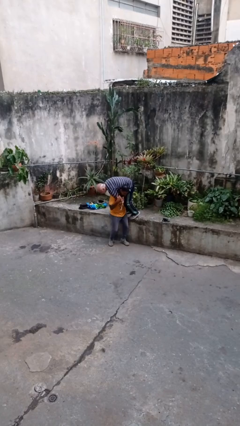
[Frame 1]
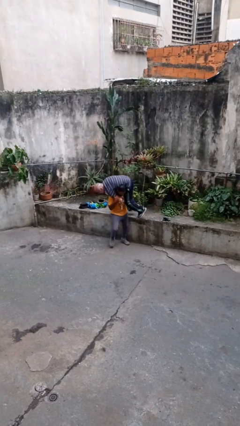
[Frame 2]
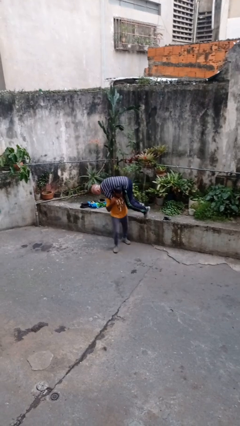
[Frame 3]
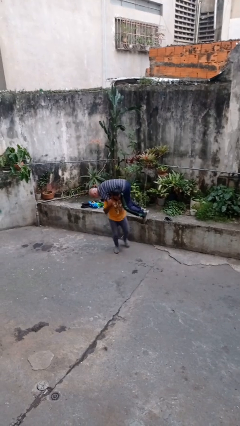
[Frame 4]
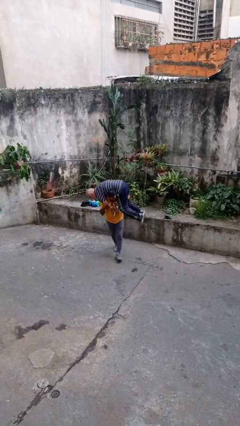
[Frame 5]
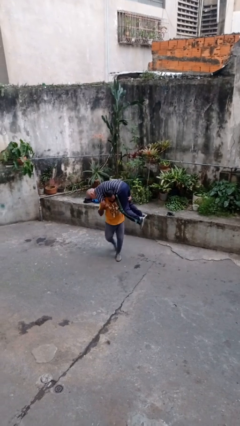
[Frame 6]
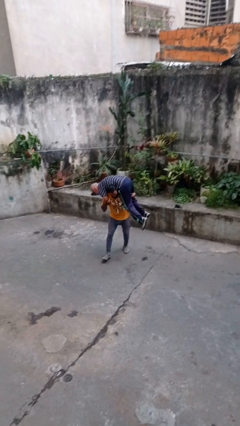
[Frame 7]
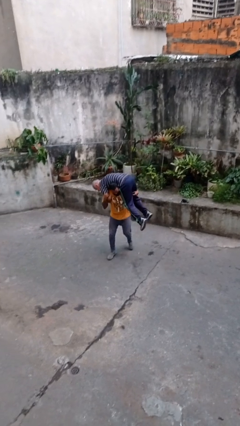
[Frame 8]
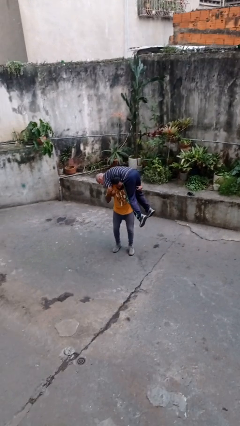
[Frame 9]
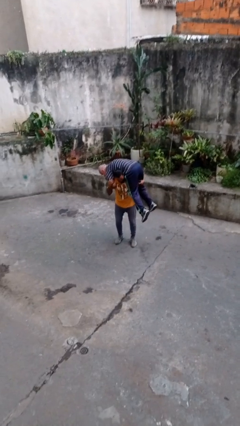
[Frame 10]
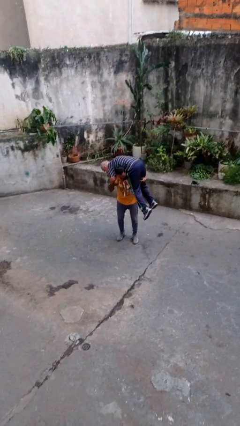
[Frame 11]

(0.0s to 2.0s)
person carries person over shoulder

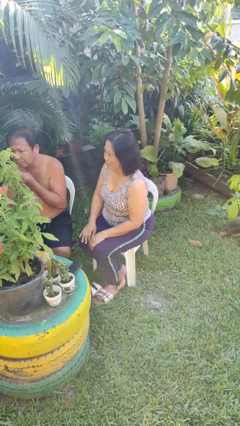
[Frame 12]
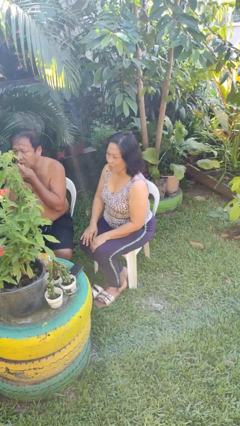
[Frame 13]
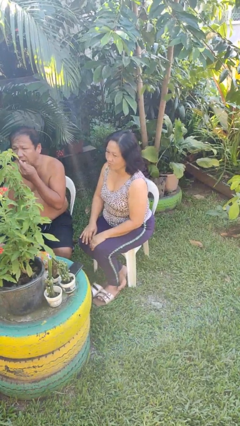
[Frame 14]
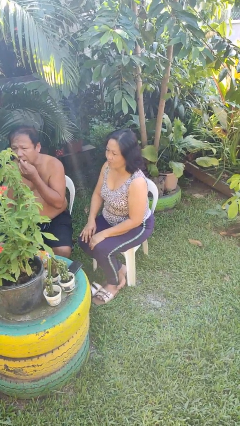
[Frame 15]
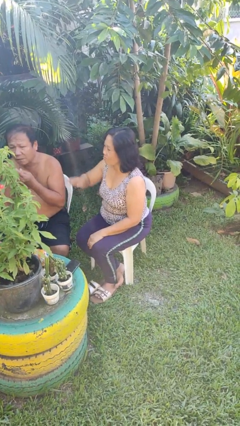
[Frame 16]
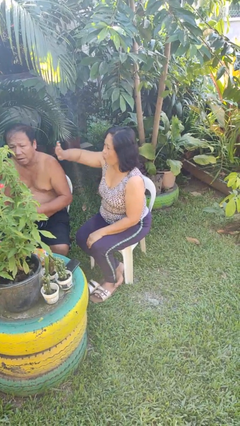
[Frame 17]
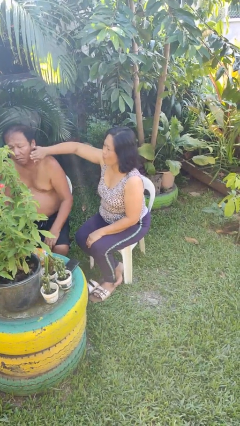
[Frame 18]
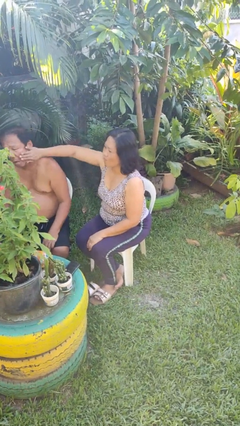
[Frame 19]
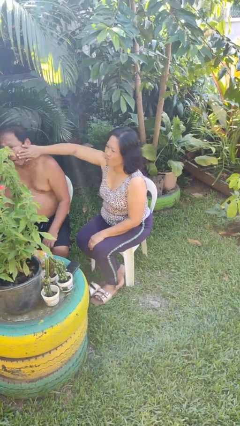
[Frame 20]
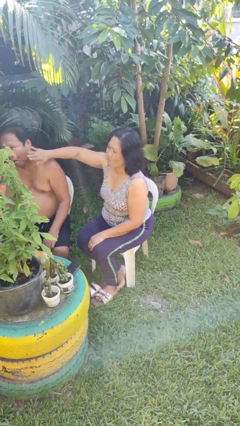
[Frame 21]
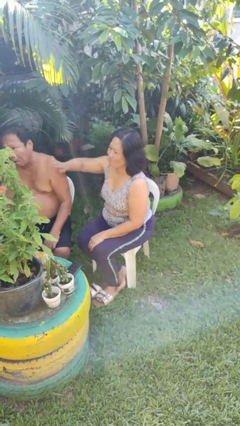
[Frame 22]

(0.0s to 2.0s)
person touches face of person

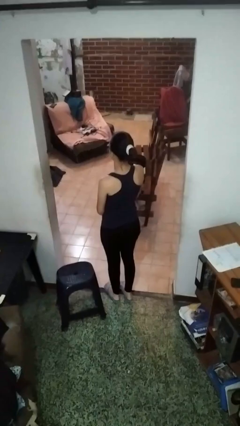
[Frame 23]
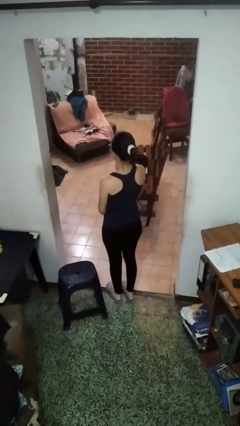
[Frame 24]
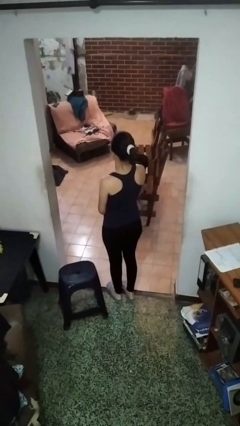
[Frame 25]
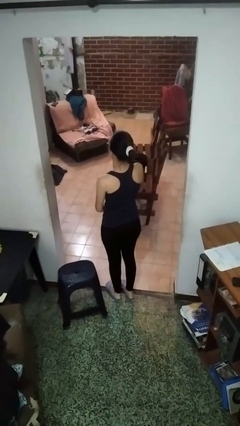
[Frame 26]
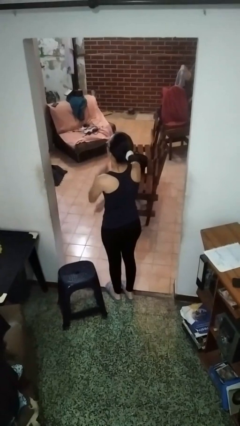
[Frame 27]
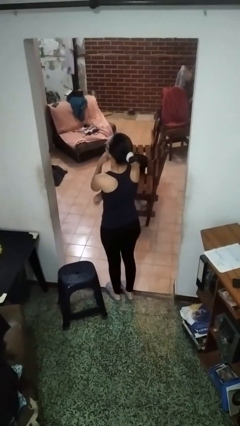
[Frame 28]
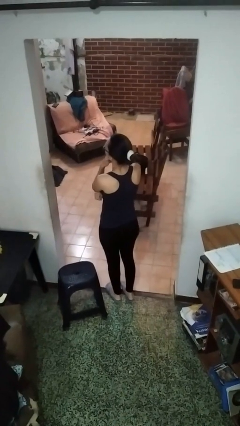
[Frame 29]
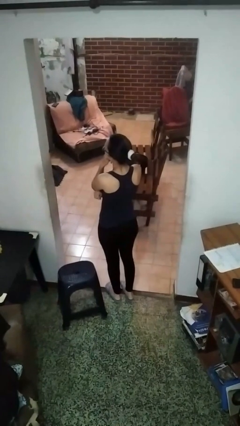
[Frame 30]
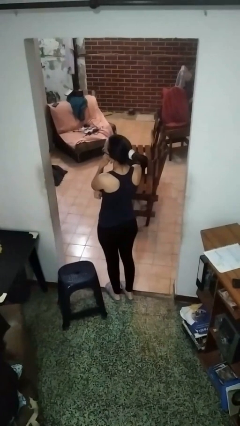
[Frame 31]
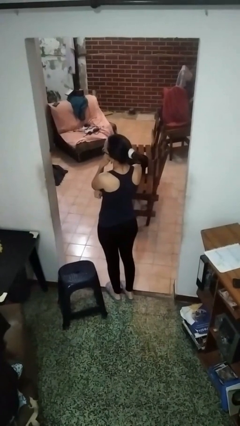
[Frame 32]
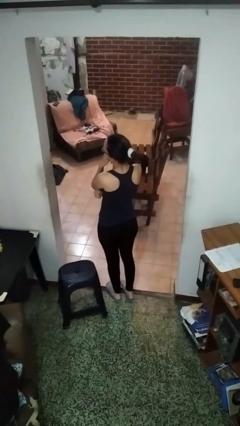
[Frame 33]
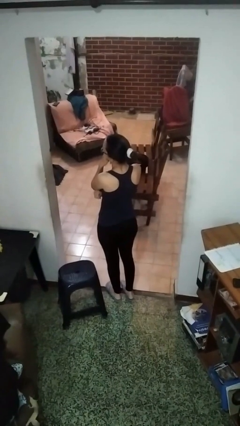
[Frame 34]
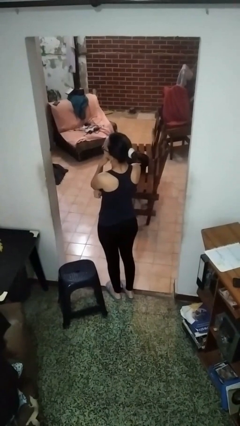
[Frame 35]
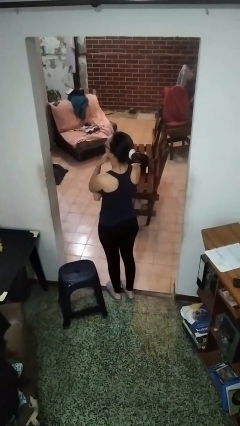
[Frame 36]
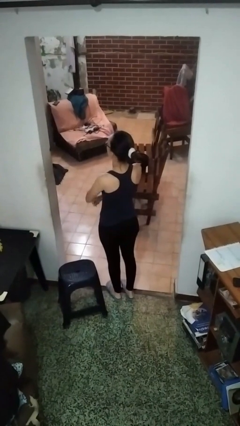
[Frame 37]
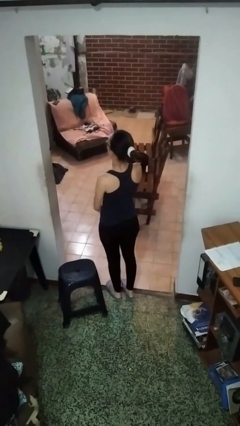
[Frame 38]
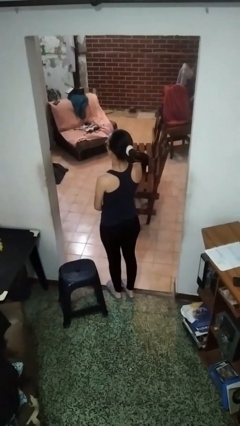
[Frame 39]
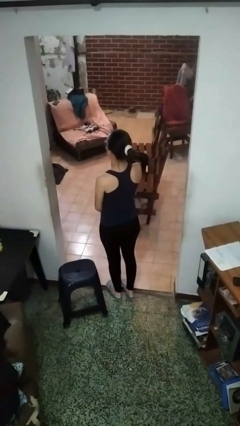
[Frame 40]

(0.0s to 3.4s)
person strokes chin

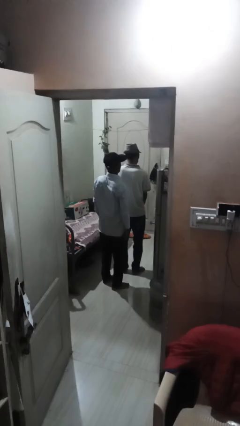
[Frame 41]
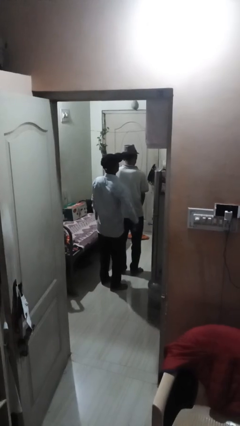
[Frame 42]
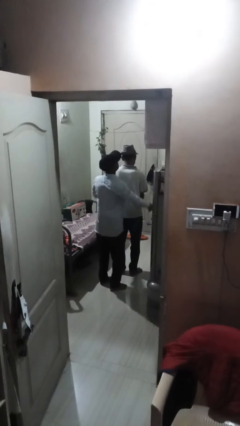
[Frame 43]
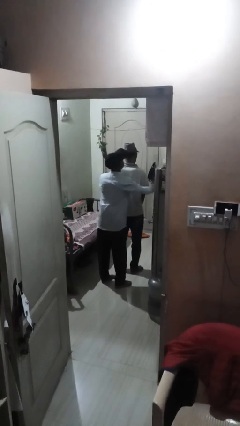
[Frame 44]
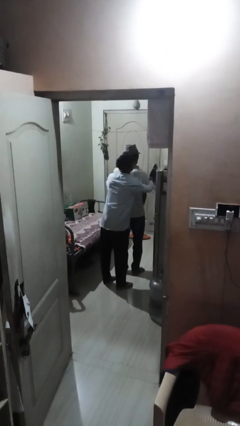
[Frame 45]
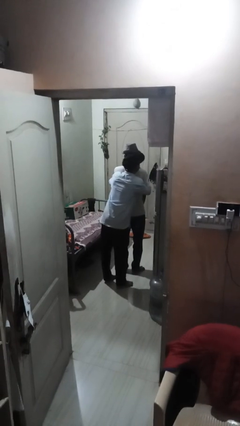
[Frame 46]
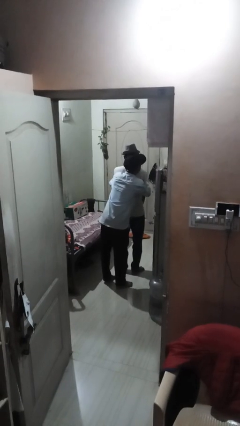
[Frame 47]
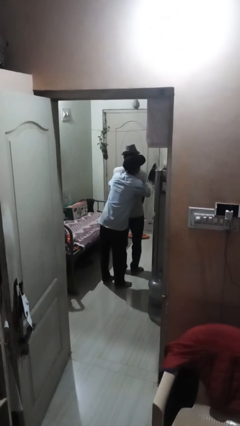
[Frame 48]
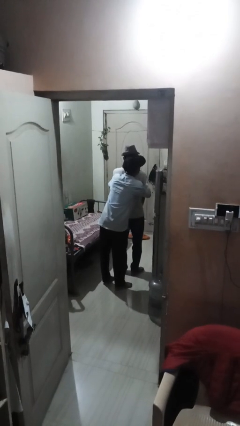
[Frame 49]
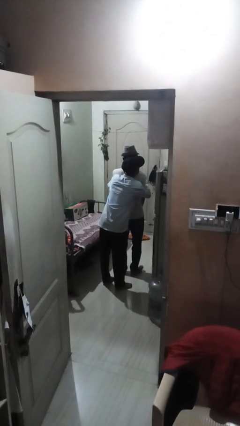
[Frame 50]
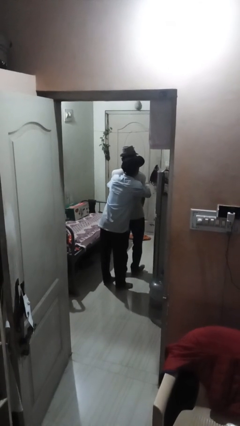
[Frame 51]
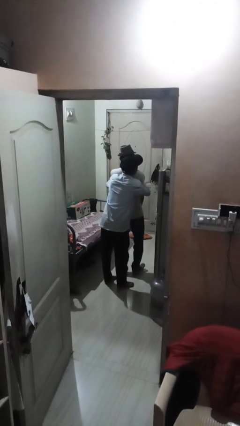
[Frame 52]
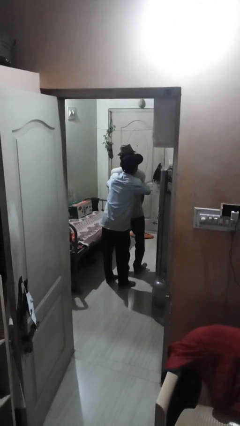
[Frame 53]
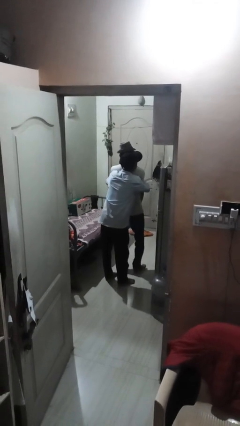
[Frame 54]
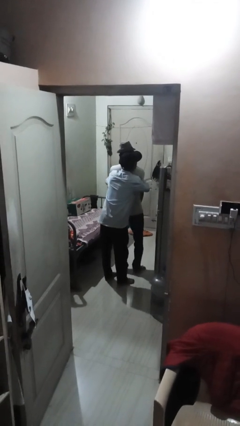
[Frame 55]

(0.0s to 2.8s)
person hugs person from behind

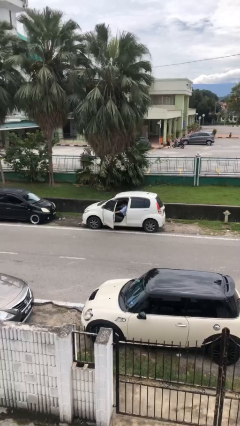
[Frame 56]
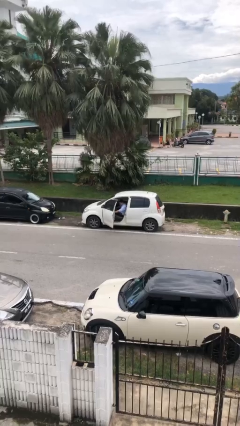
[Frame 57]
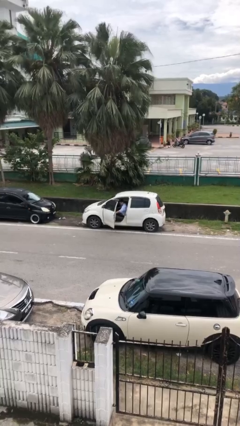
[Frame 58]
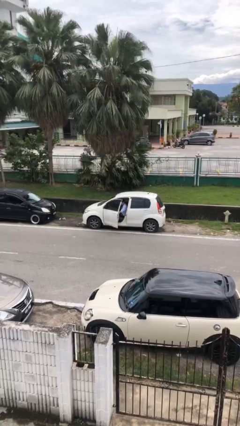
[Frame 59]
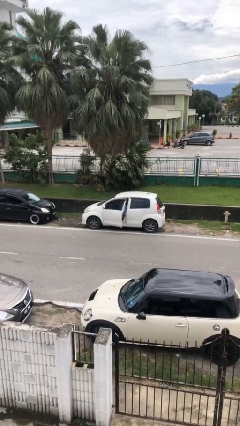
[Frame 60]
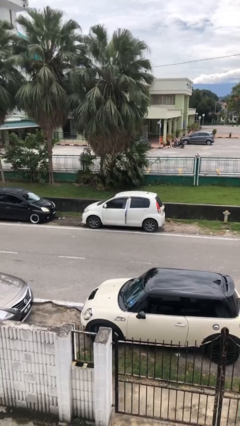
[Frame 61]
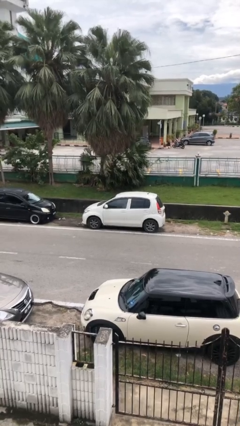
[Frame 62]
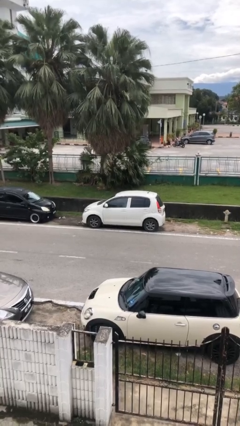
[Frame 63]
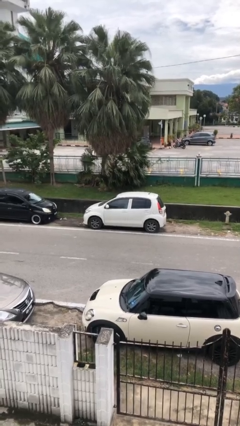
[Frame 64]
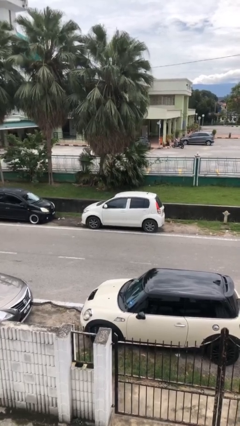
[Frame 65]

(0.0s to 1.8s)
person closes car door

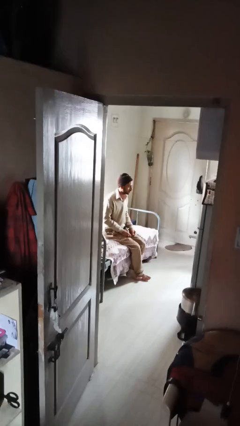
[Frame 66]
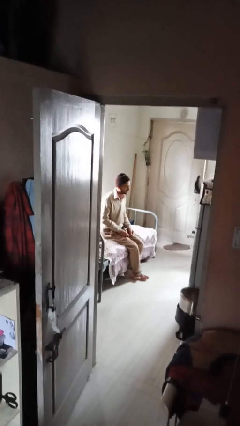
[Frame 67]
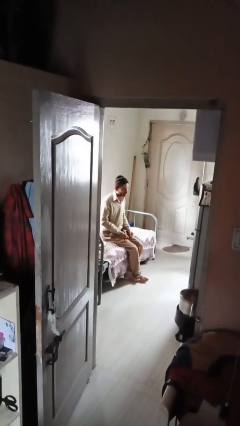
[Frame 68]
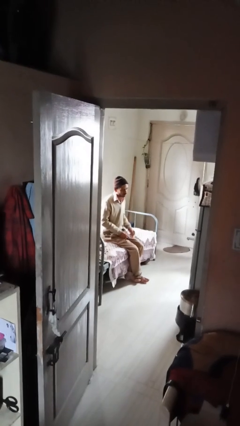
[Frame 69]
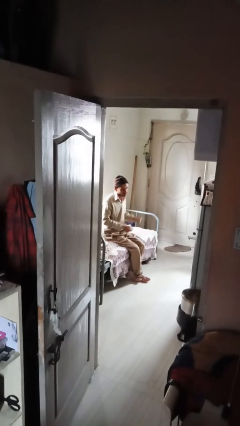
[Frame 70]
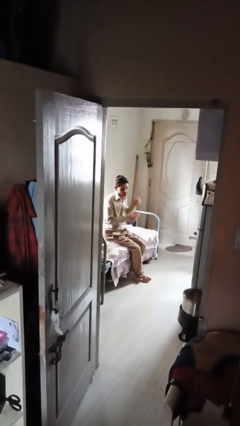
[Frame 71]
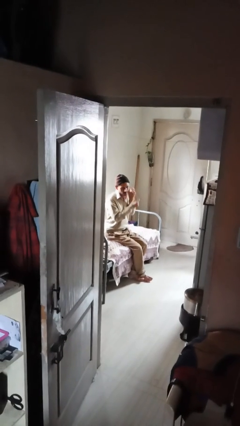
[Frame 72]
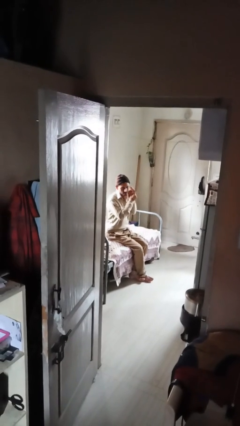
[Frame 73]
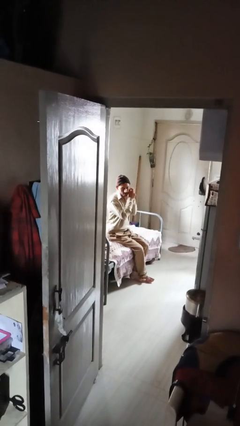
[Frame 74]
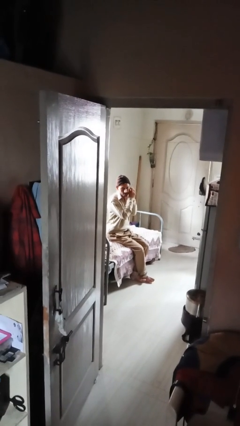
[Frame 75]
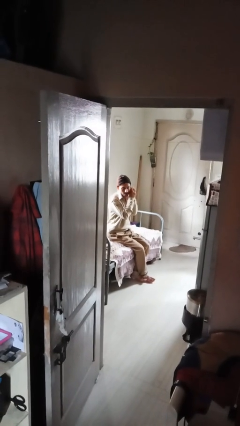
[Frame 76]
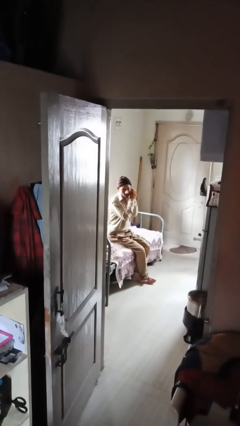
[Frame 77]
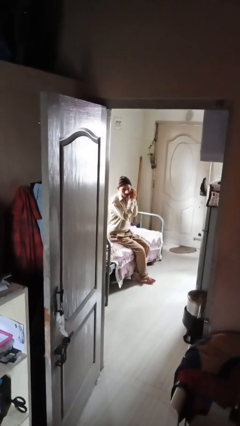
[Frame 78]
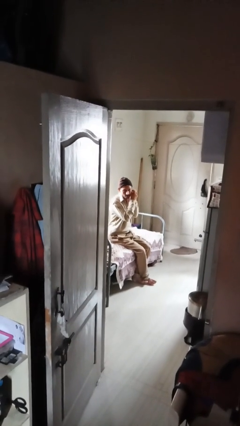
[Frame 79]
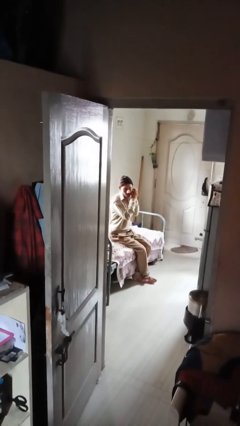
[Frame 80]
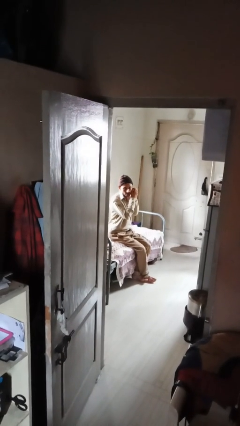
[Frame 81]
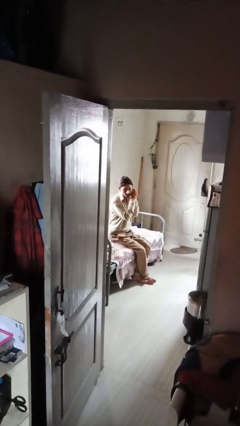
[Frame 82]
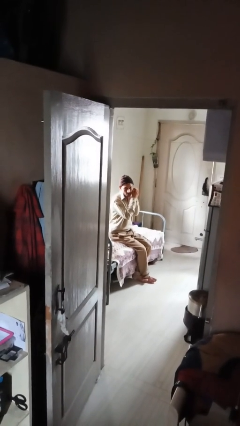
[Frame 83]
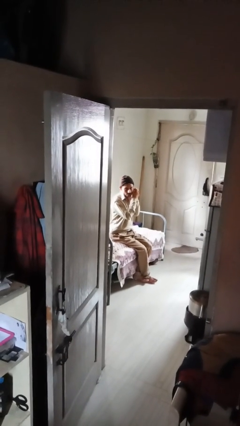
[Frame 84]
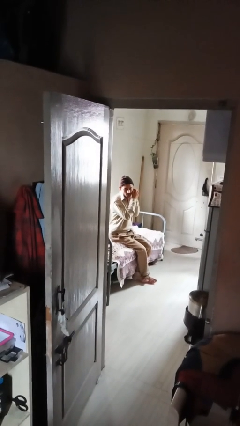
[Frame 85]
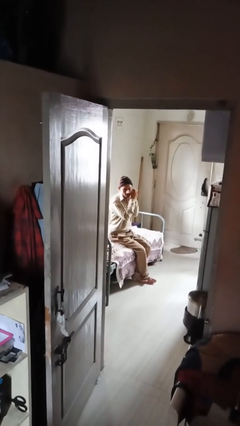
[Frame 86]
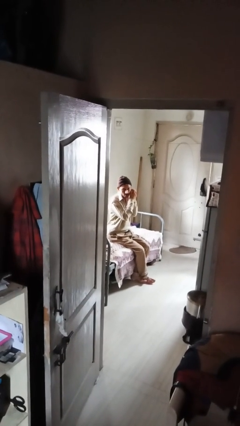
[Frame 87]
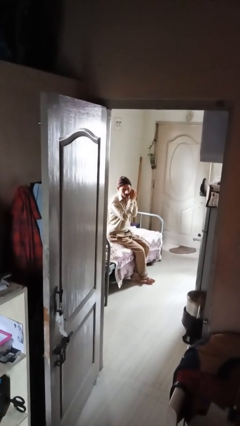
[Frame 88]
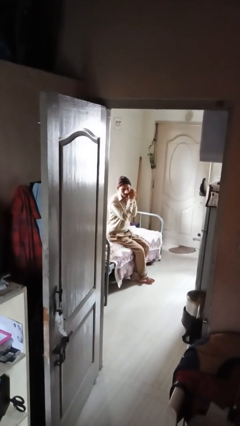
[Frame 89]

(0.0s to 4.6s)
person puts on earrings

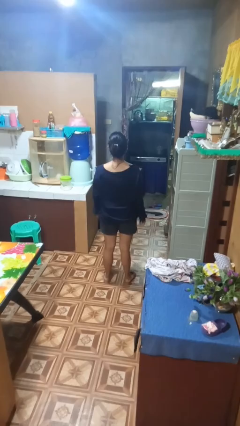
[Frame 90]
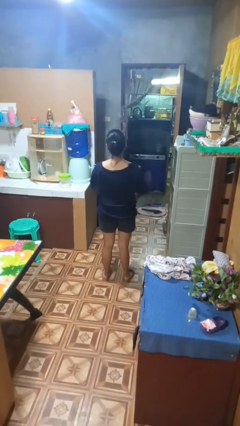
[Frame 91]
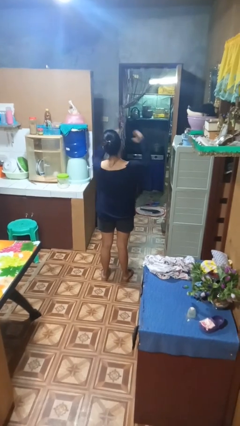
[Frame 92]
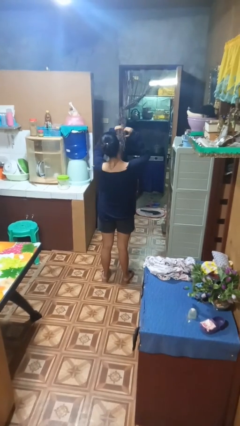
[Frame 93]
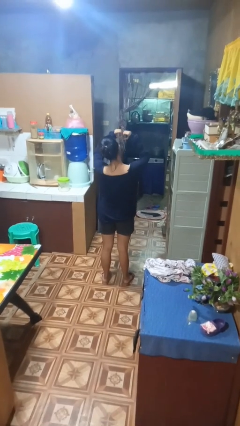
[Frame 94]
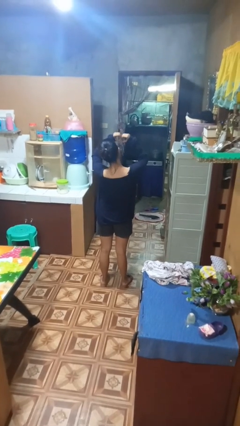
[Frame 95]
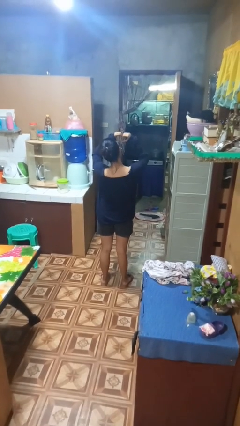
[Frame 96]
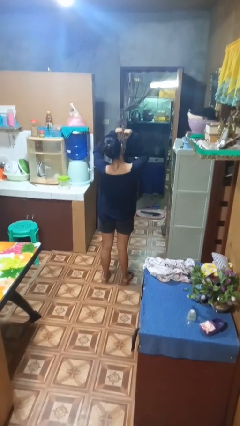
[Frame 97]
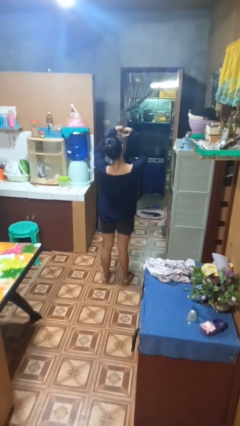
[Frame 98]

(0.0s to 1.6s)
person gestures heart
